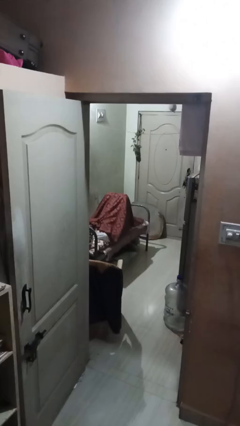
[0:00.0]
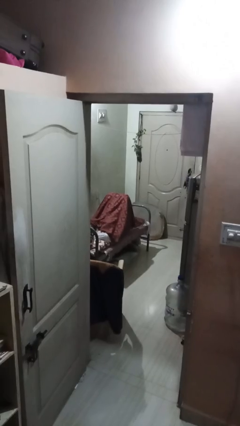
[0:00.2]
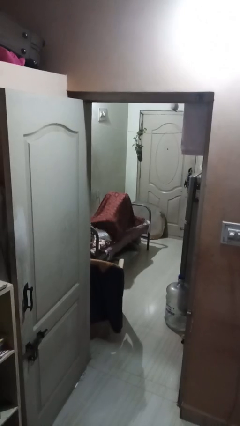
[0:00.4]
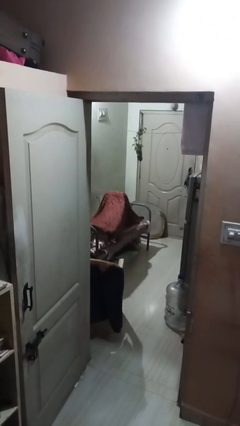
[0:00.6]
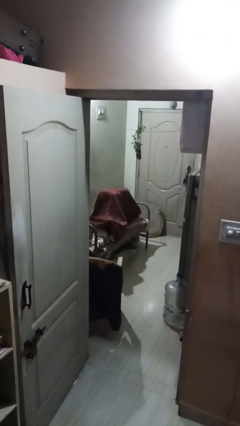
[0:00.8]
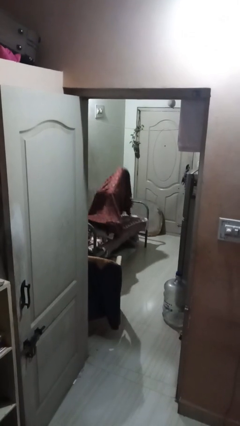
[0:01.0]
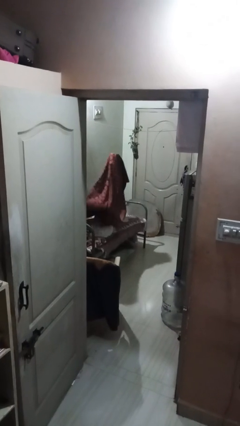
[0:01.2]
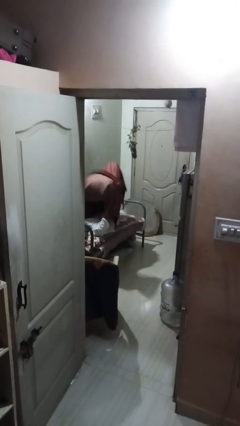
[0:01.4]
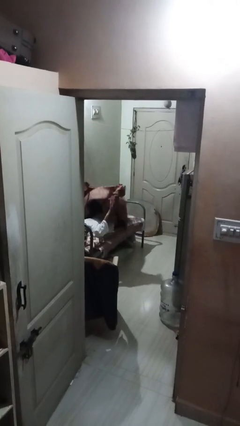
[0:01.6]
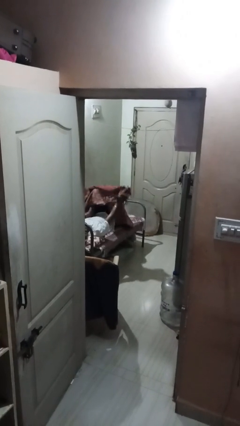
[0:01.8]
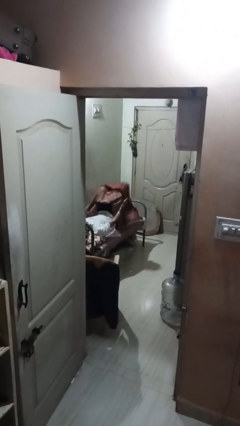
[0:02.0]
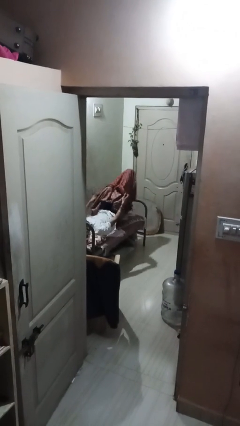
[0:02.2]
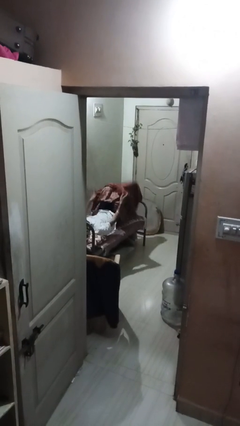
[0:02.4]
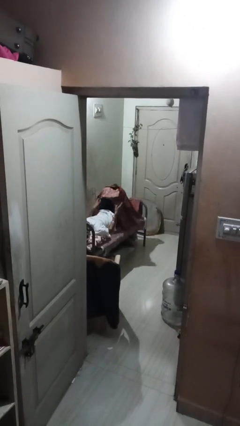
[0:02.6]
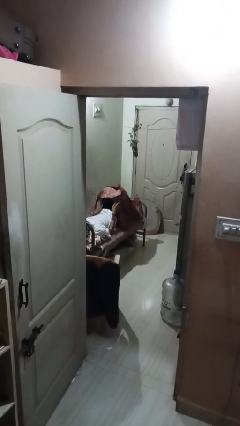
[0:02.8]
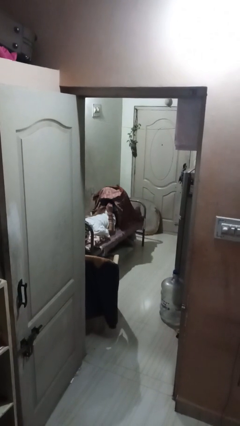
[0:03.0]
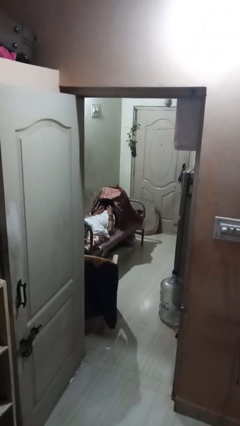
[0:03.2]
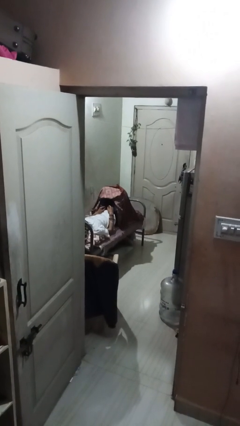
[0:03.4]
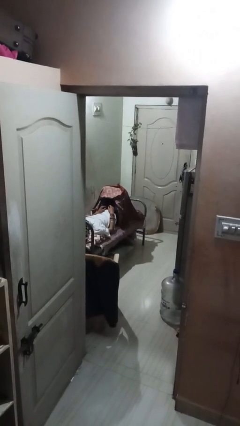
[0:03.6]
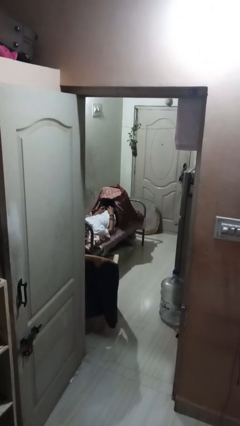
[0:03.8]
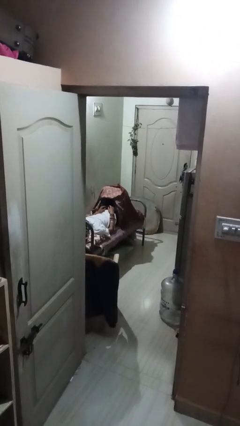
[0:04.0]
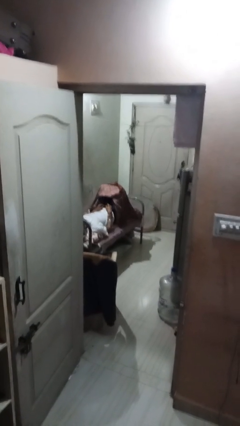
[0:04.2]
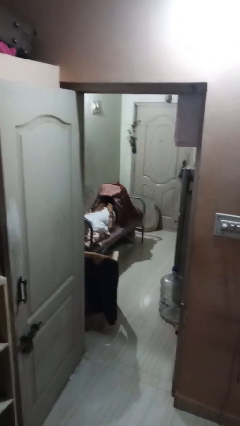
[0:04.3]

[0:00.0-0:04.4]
person uncovers with bedsheets

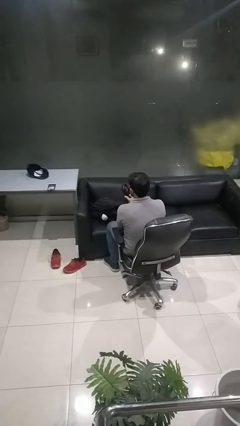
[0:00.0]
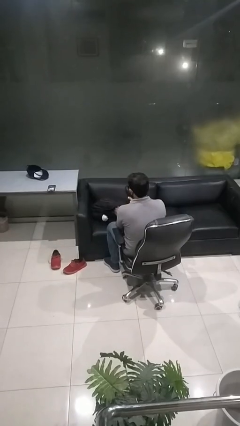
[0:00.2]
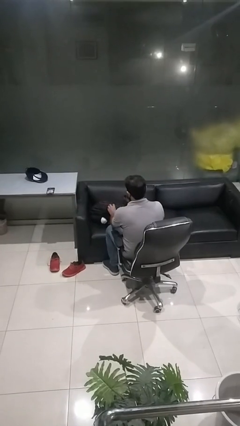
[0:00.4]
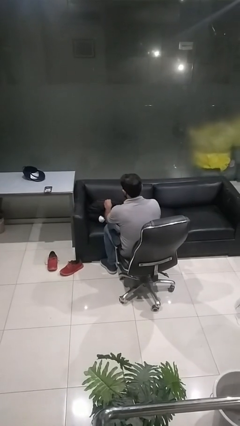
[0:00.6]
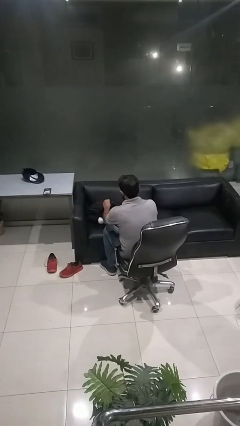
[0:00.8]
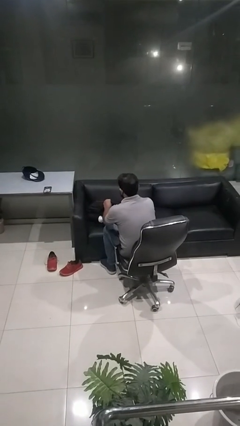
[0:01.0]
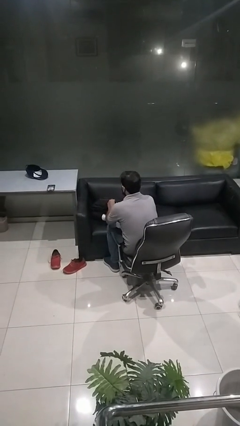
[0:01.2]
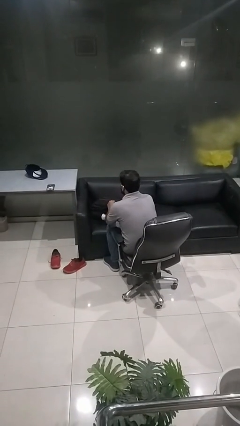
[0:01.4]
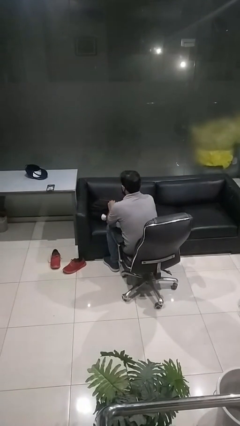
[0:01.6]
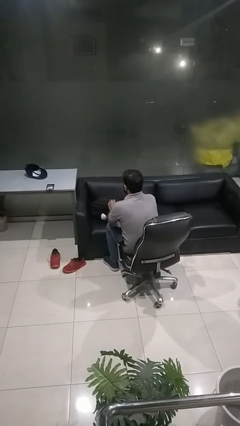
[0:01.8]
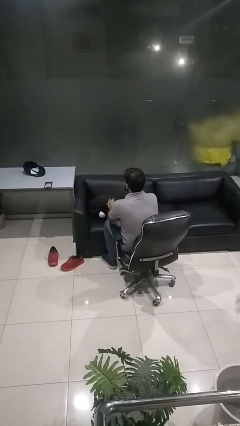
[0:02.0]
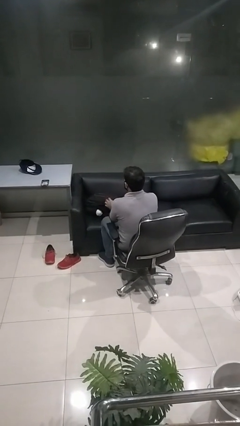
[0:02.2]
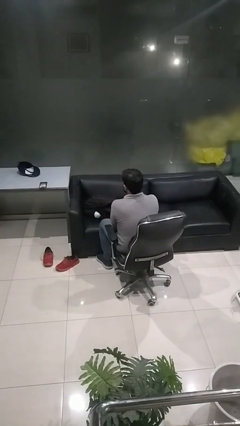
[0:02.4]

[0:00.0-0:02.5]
person puts object into backpack

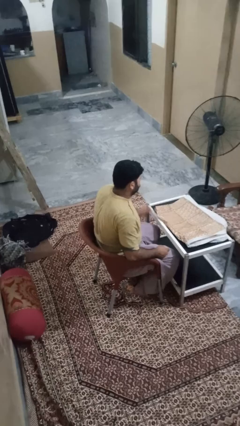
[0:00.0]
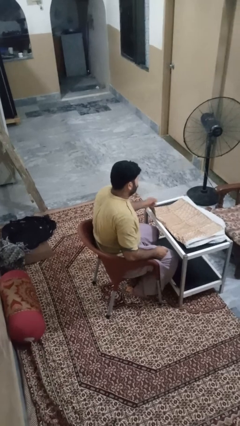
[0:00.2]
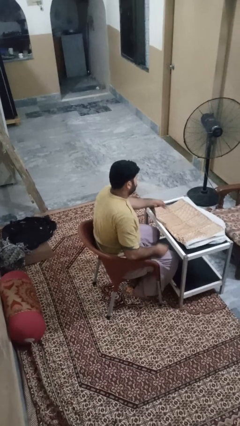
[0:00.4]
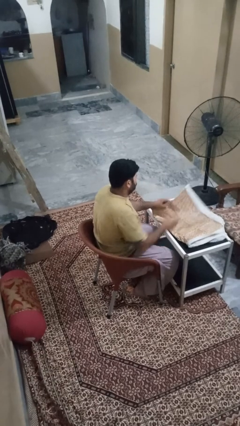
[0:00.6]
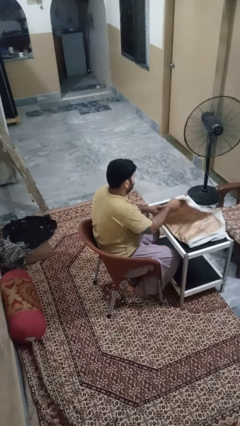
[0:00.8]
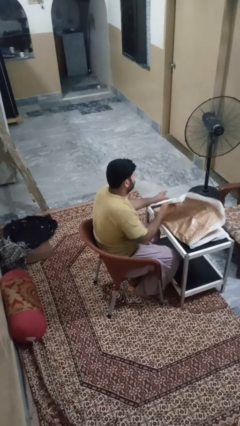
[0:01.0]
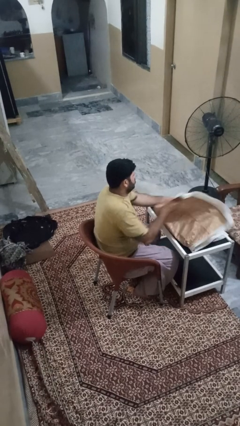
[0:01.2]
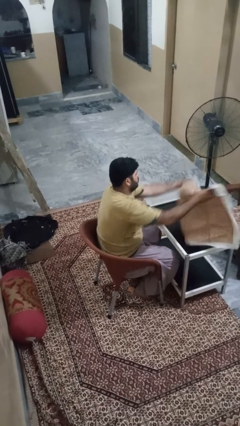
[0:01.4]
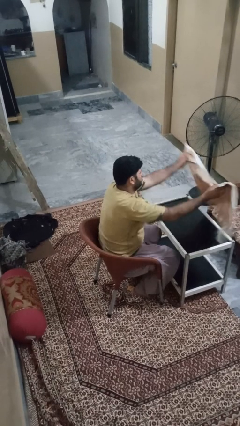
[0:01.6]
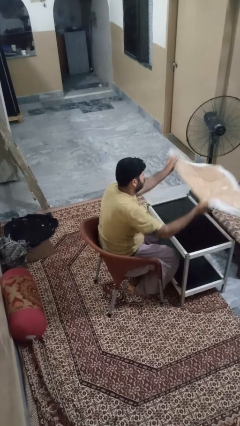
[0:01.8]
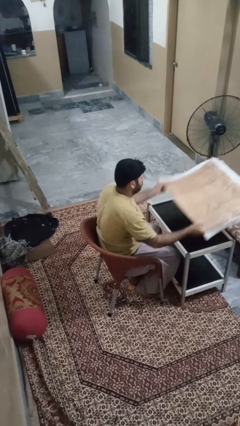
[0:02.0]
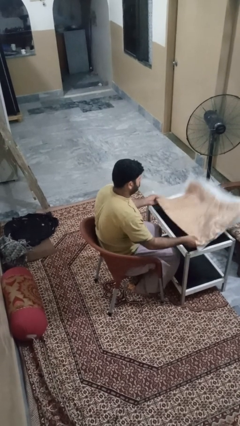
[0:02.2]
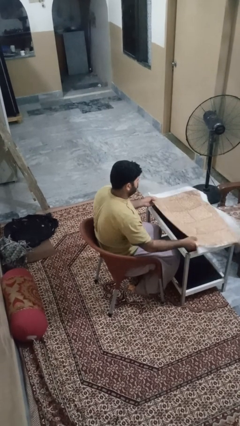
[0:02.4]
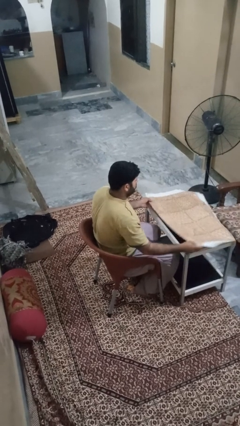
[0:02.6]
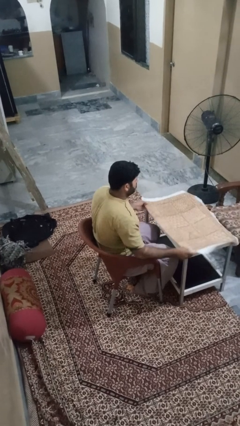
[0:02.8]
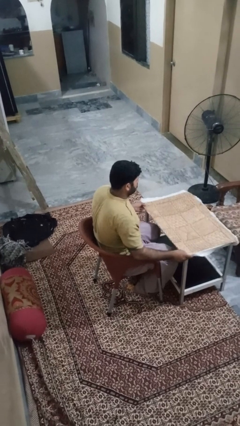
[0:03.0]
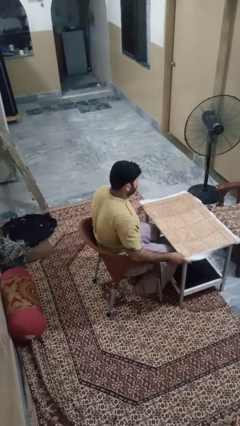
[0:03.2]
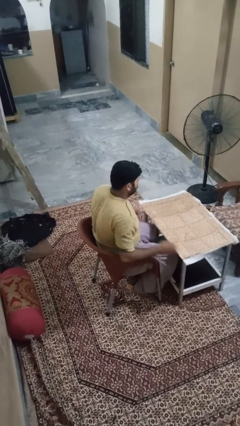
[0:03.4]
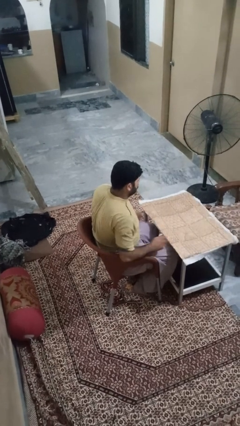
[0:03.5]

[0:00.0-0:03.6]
person spreads tablecloth

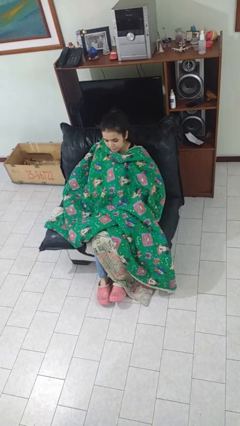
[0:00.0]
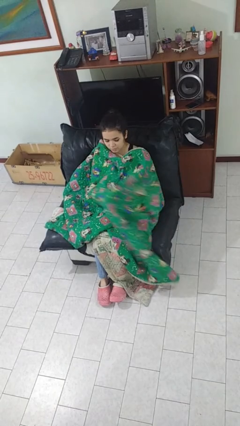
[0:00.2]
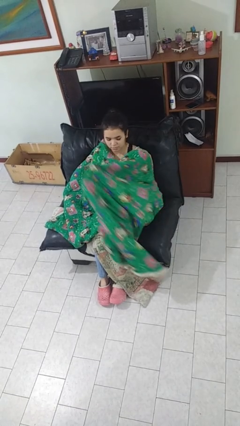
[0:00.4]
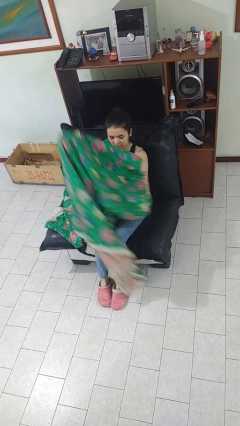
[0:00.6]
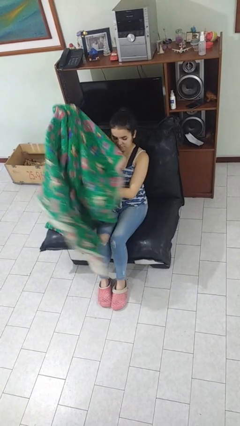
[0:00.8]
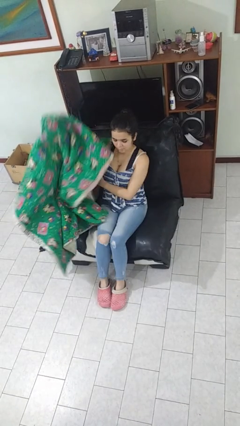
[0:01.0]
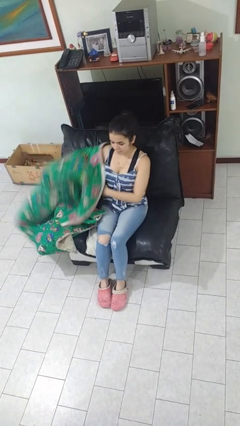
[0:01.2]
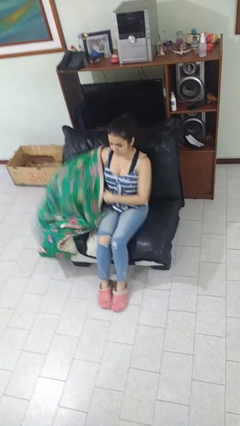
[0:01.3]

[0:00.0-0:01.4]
person uncovers with blanket

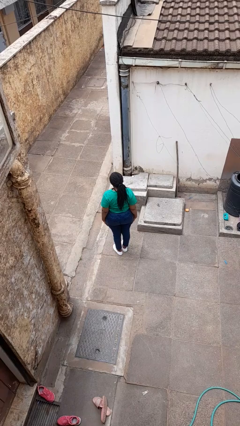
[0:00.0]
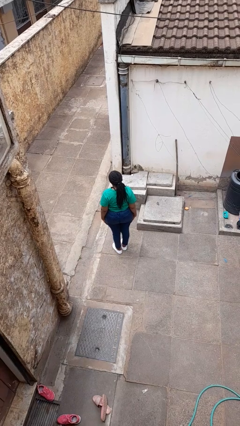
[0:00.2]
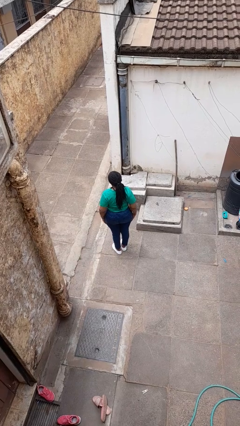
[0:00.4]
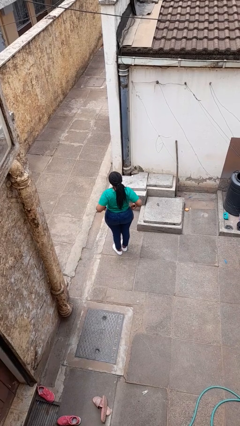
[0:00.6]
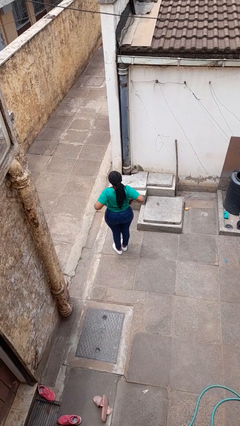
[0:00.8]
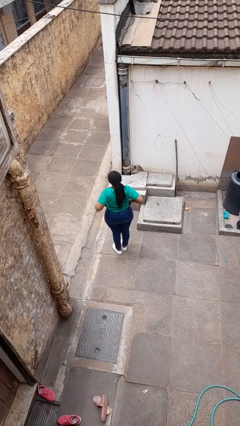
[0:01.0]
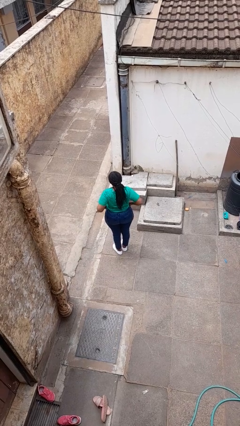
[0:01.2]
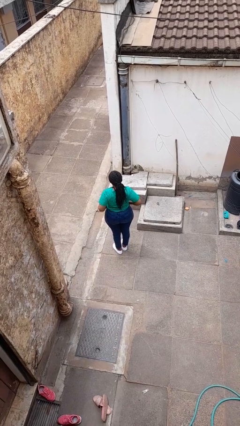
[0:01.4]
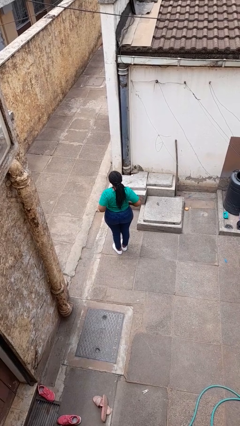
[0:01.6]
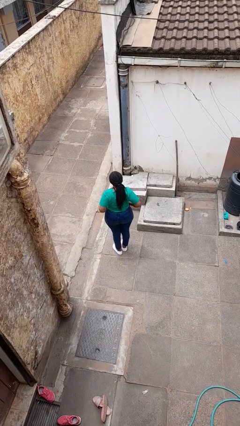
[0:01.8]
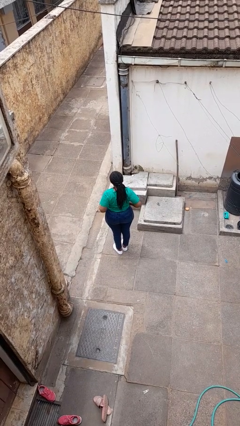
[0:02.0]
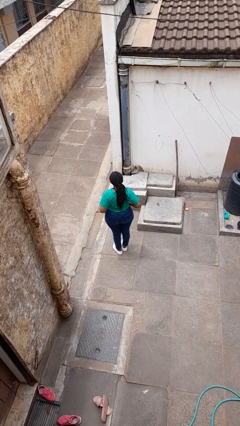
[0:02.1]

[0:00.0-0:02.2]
person puts hands in back pockets

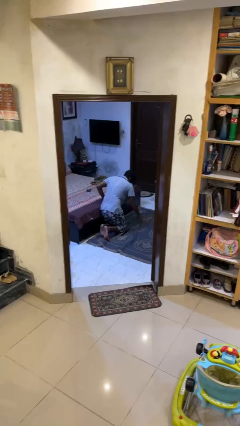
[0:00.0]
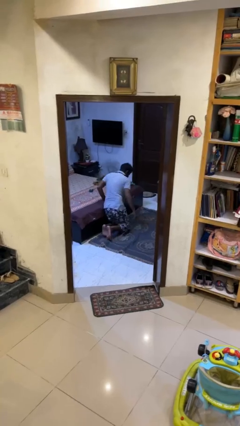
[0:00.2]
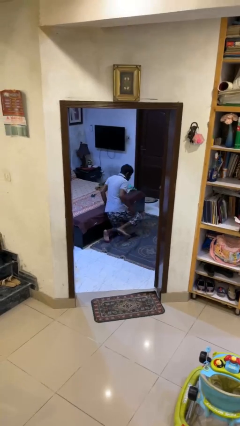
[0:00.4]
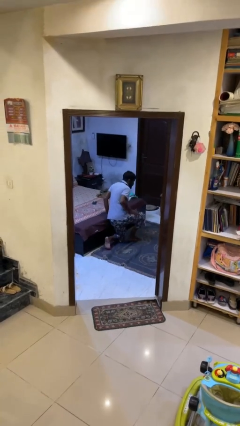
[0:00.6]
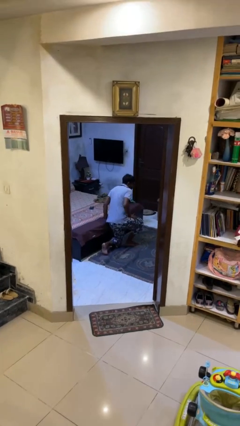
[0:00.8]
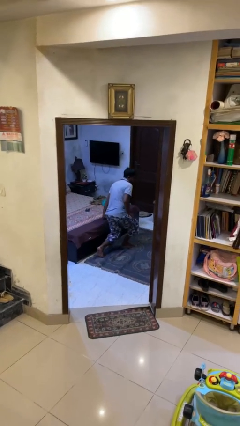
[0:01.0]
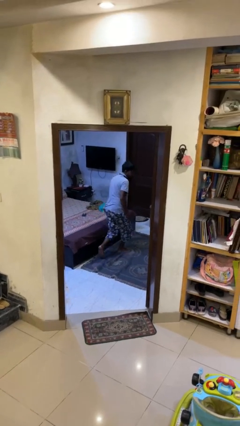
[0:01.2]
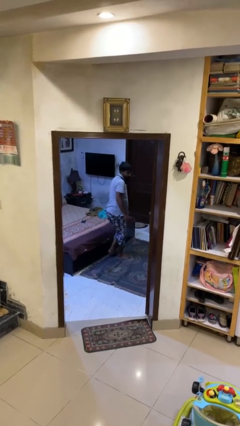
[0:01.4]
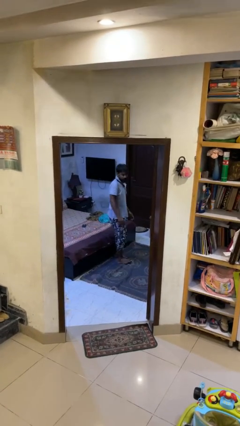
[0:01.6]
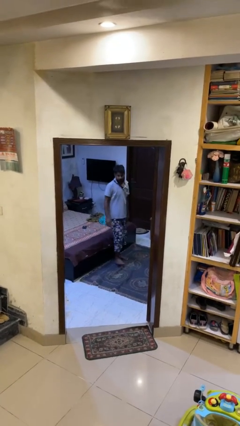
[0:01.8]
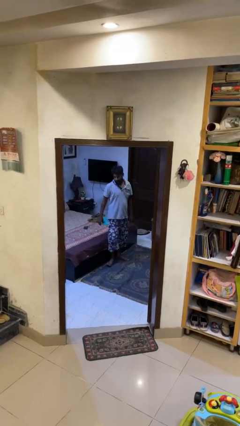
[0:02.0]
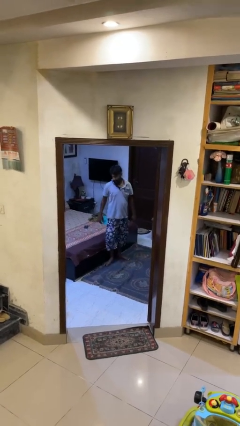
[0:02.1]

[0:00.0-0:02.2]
person stands up from floor

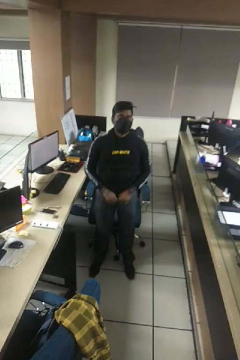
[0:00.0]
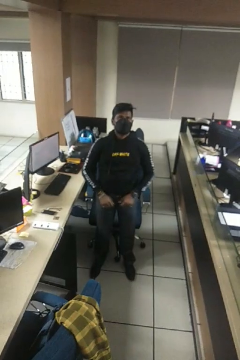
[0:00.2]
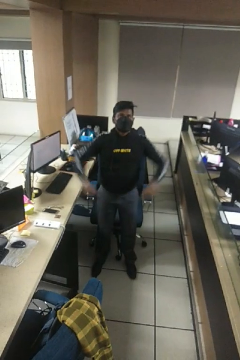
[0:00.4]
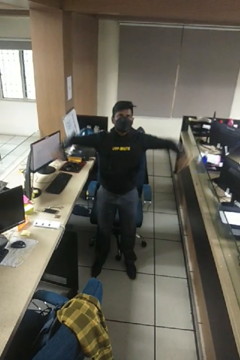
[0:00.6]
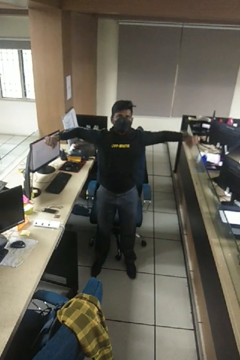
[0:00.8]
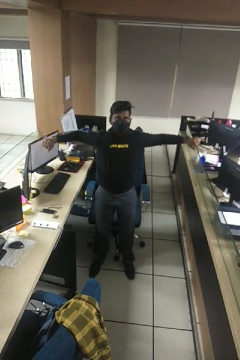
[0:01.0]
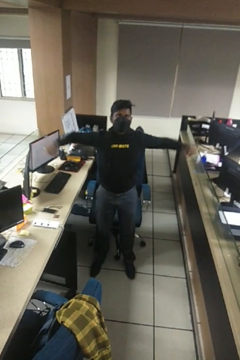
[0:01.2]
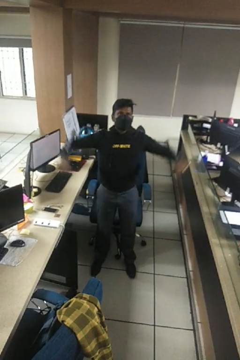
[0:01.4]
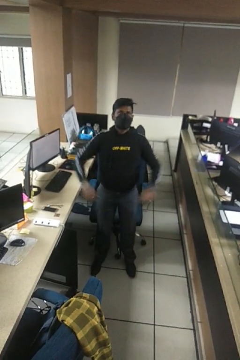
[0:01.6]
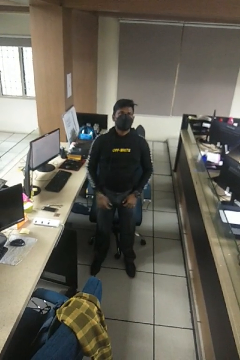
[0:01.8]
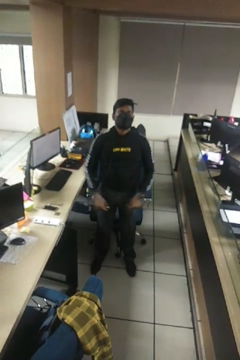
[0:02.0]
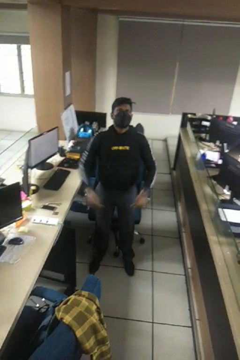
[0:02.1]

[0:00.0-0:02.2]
person stretches arms to side
